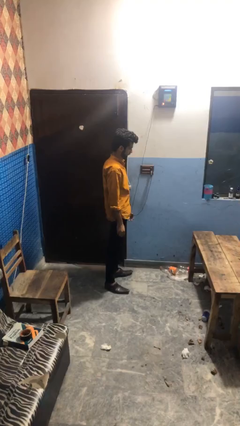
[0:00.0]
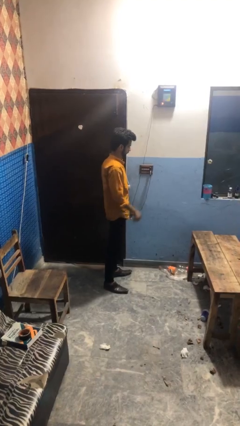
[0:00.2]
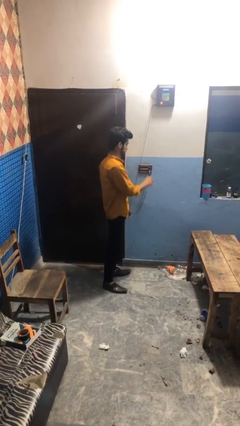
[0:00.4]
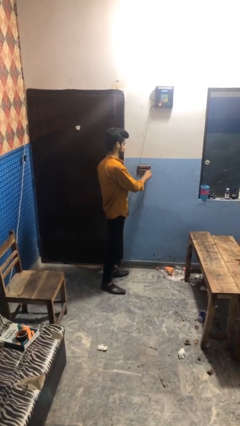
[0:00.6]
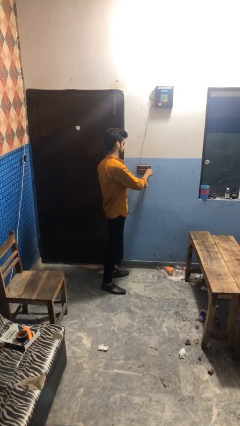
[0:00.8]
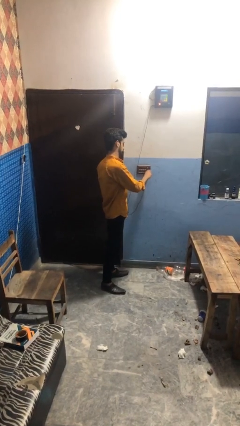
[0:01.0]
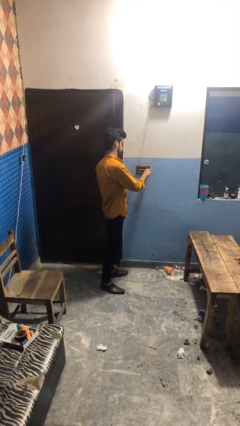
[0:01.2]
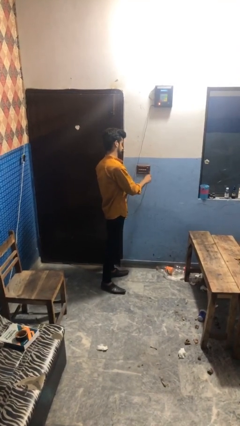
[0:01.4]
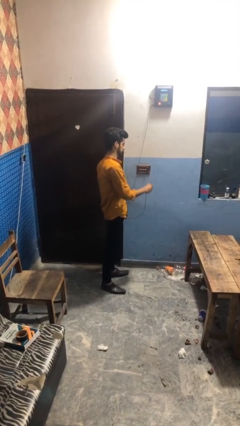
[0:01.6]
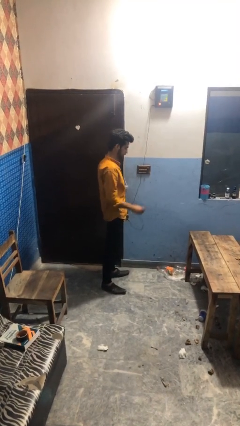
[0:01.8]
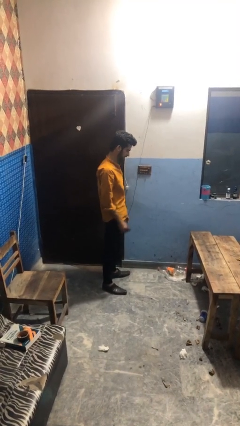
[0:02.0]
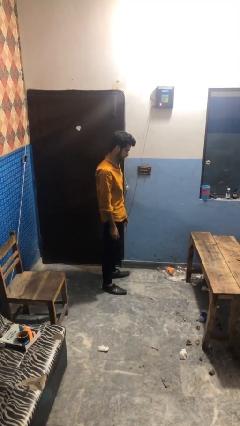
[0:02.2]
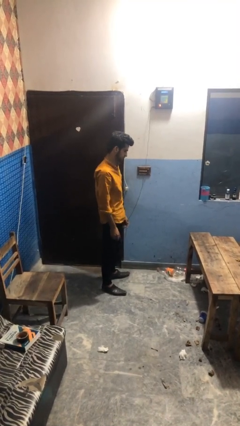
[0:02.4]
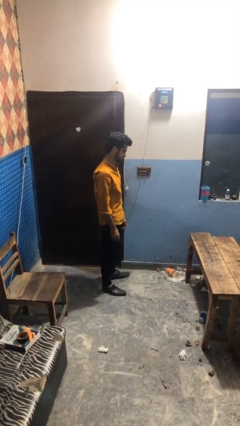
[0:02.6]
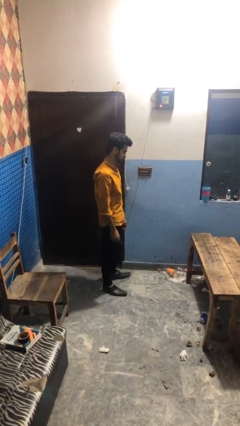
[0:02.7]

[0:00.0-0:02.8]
person unplugs from electrical socket

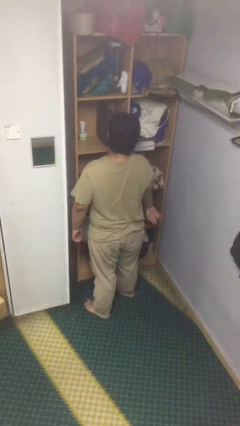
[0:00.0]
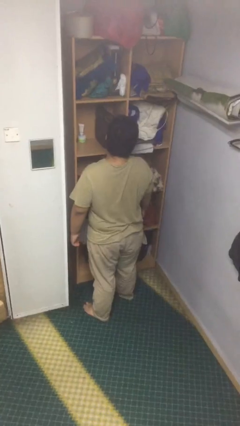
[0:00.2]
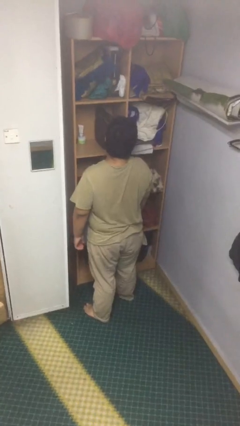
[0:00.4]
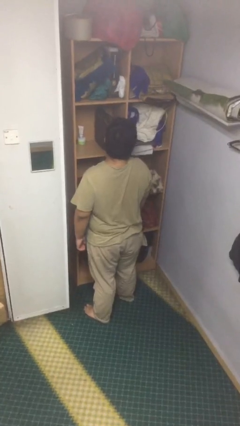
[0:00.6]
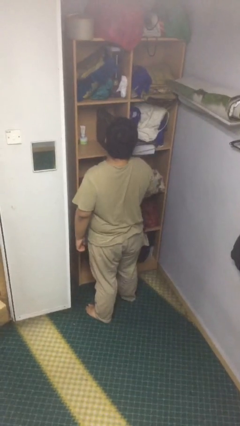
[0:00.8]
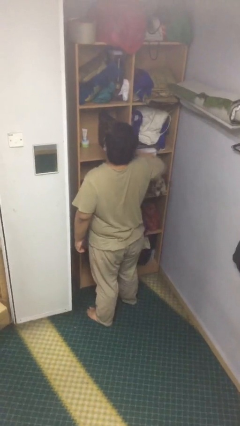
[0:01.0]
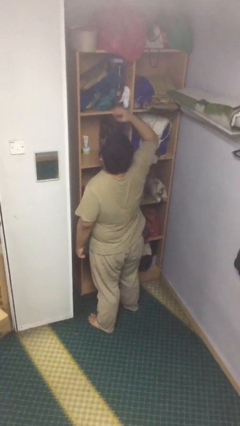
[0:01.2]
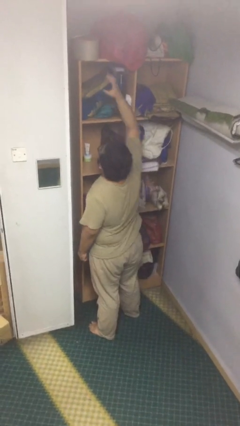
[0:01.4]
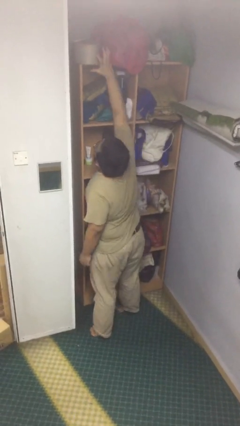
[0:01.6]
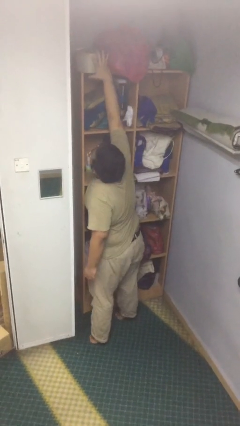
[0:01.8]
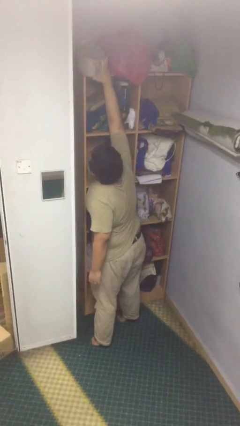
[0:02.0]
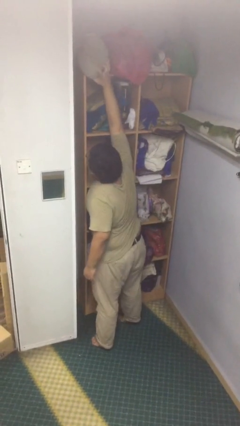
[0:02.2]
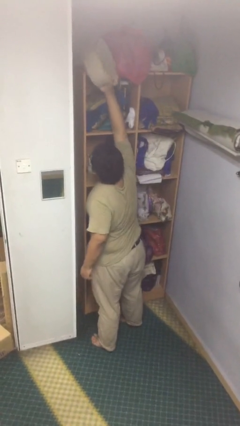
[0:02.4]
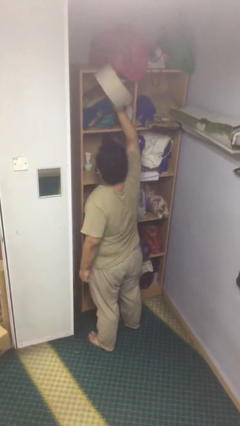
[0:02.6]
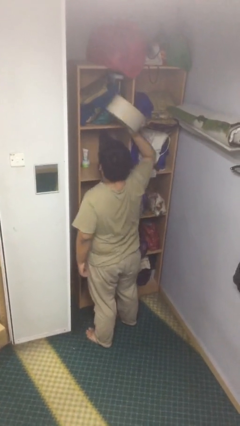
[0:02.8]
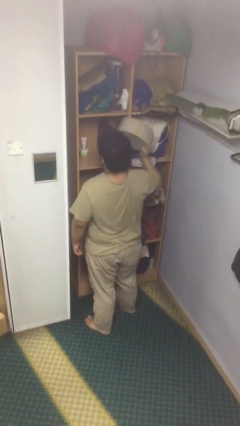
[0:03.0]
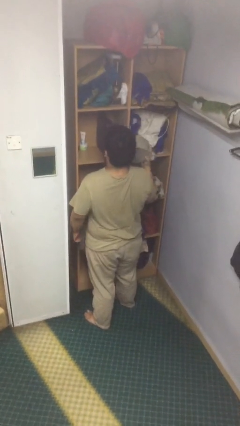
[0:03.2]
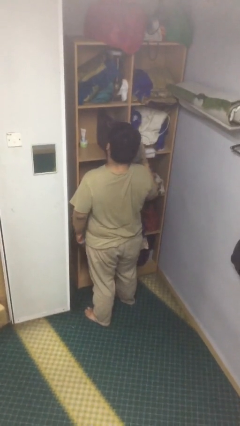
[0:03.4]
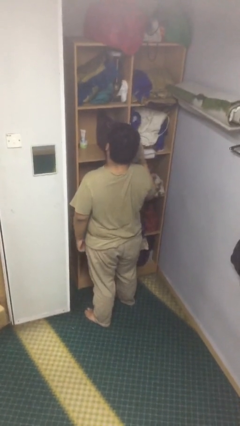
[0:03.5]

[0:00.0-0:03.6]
person picks up object from shelf

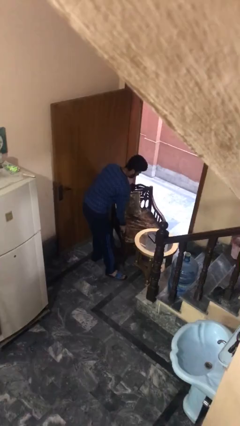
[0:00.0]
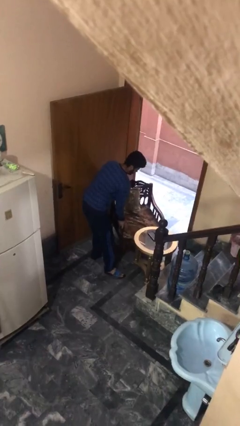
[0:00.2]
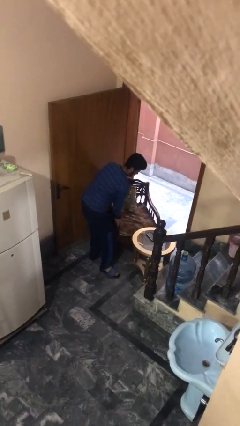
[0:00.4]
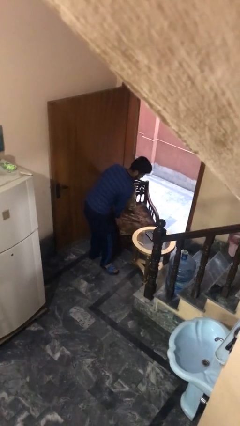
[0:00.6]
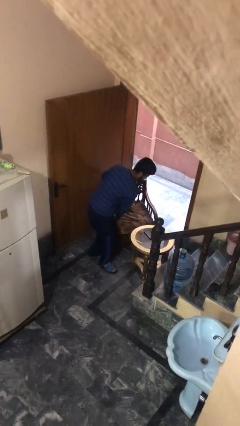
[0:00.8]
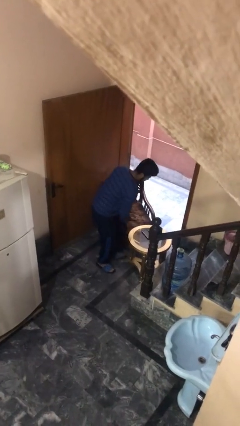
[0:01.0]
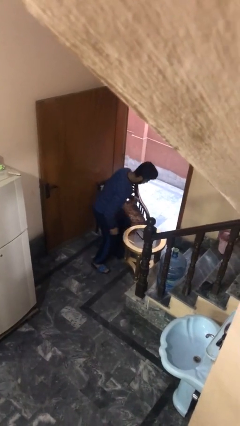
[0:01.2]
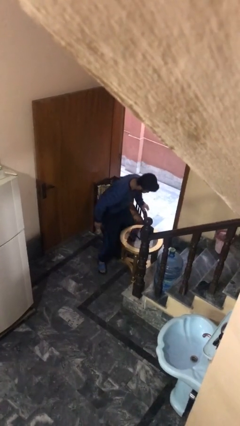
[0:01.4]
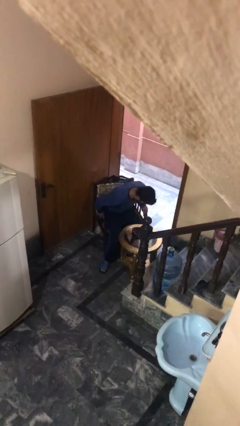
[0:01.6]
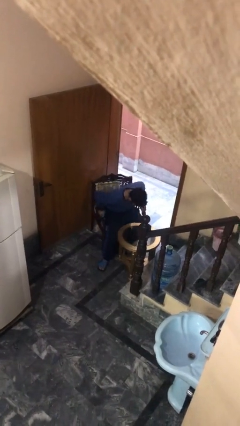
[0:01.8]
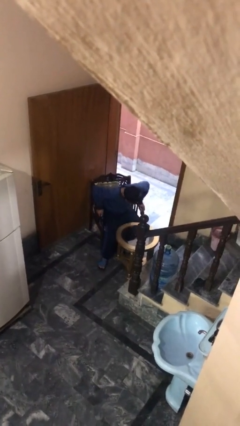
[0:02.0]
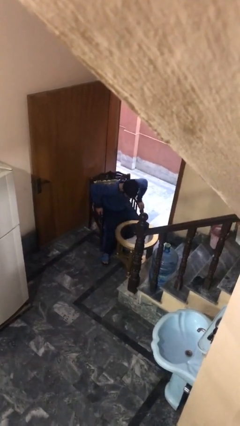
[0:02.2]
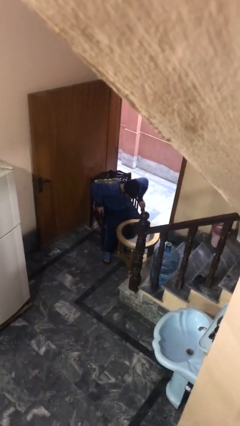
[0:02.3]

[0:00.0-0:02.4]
person sits down

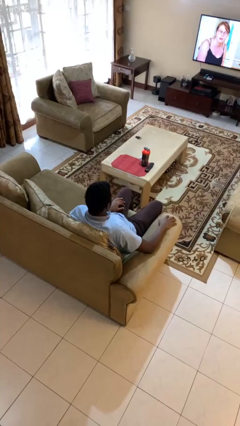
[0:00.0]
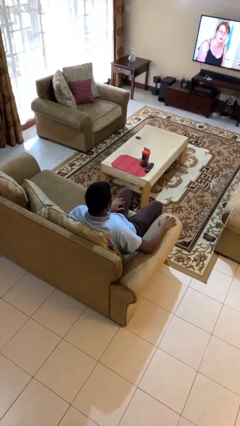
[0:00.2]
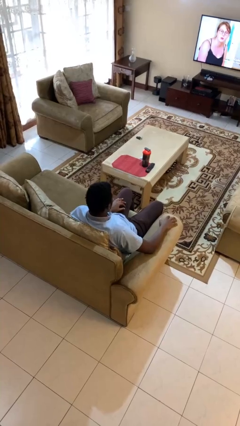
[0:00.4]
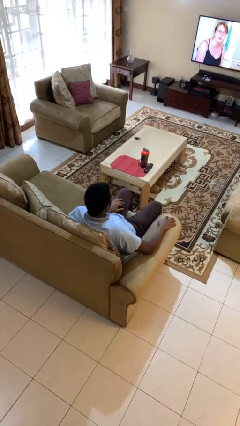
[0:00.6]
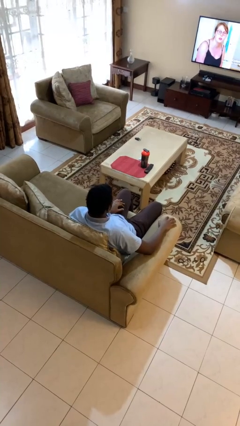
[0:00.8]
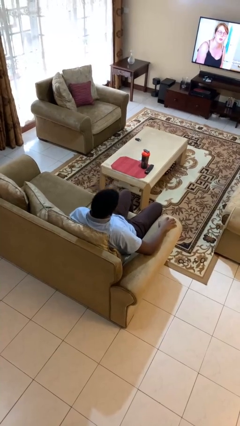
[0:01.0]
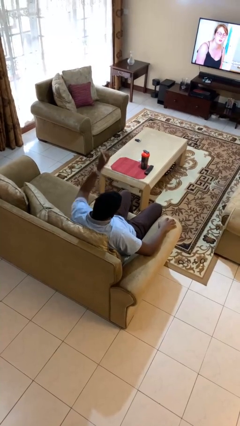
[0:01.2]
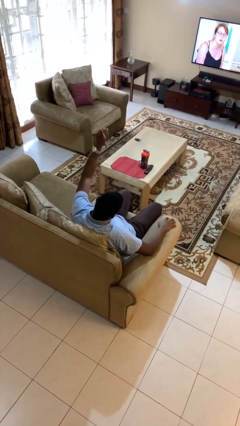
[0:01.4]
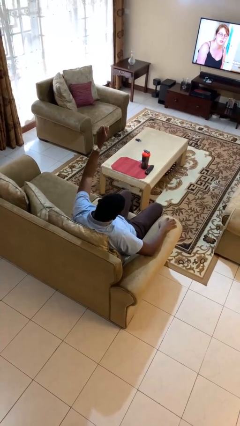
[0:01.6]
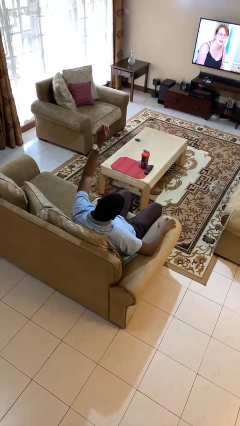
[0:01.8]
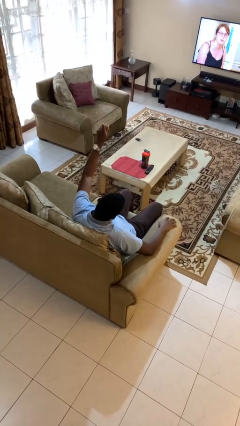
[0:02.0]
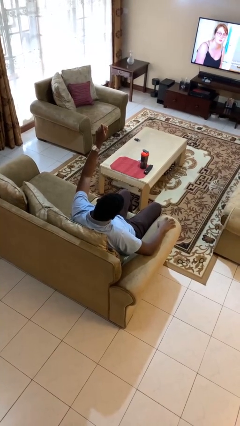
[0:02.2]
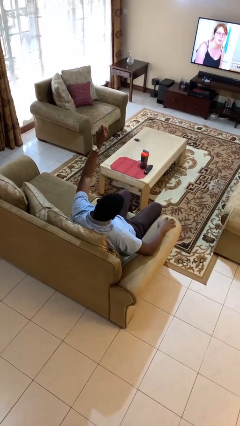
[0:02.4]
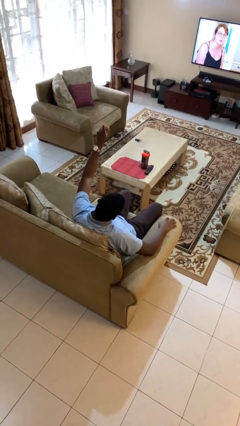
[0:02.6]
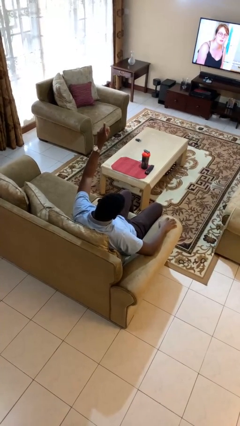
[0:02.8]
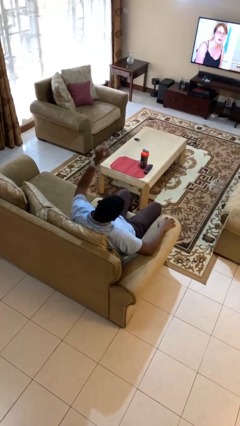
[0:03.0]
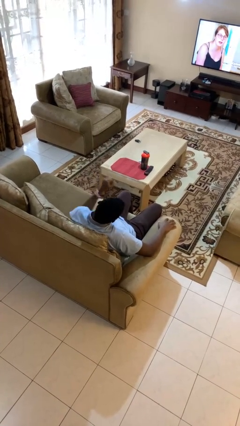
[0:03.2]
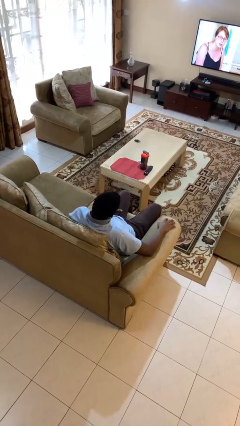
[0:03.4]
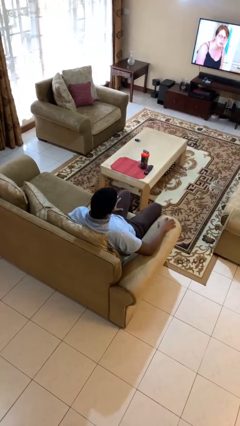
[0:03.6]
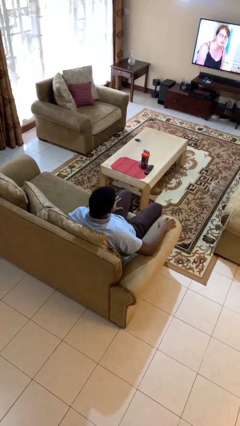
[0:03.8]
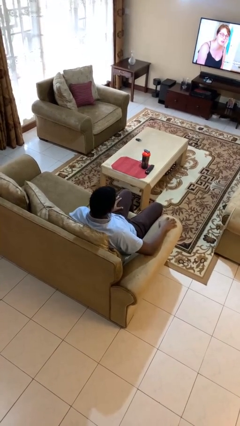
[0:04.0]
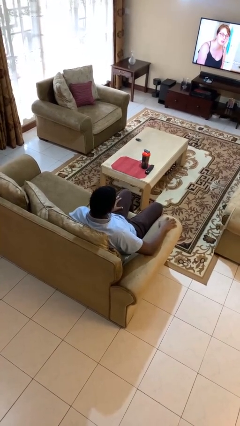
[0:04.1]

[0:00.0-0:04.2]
person gestures number one

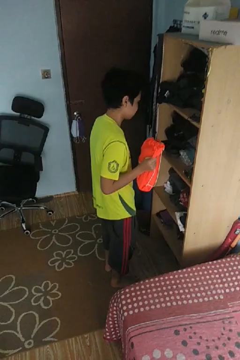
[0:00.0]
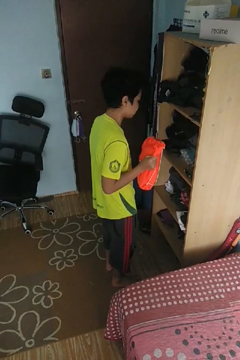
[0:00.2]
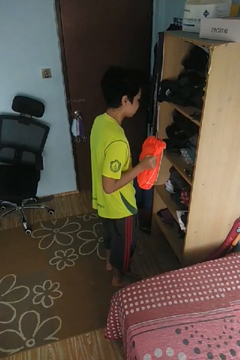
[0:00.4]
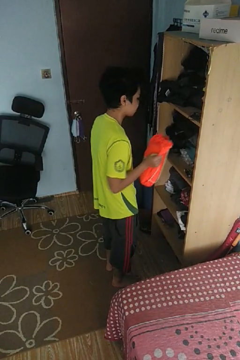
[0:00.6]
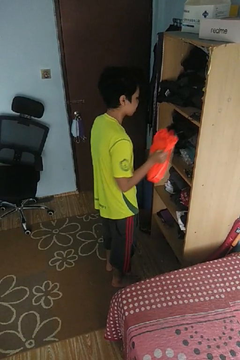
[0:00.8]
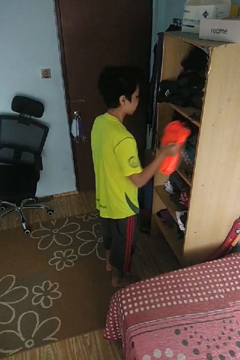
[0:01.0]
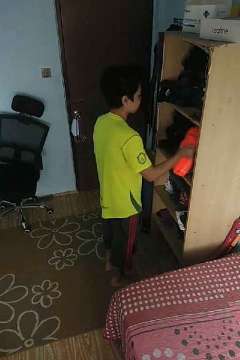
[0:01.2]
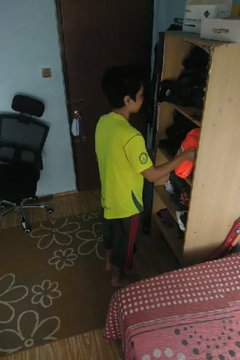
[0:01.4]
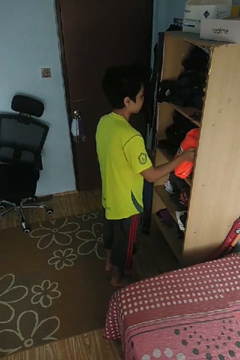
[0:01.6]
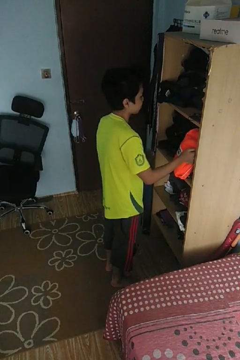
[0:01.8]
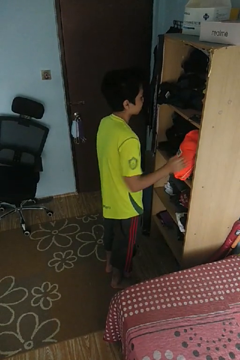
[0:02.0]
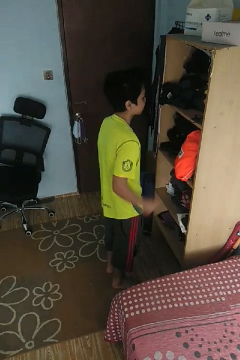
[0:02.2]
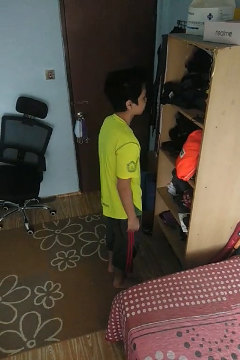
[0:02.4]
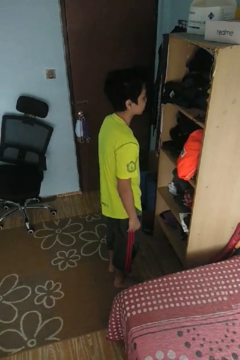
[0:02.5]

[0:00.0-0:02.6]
person puts down object into cabinet

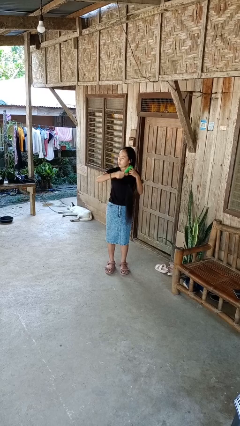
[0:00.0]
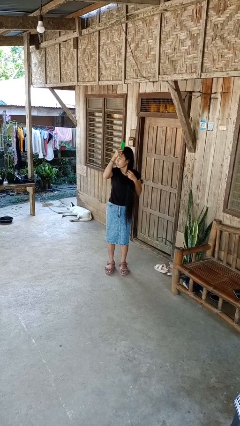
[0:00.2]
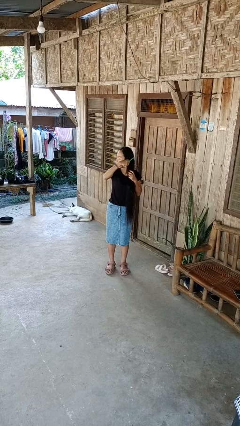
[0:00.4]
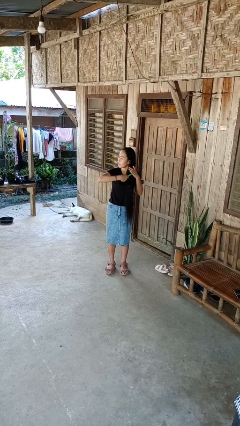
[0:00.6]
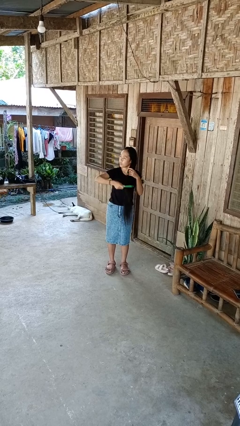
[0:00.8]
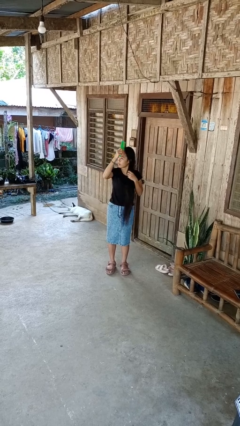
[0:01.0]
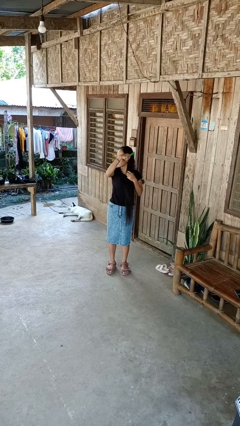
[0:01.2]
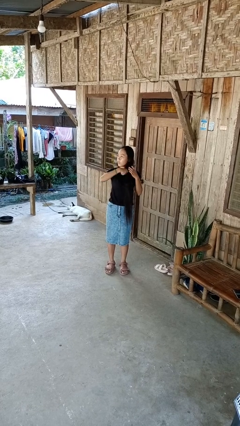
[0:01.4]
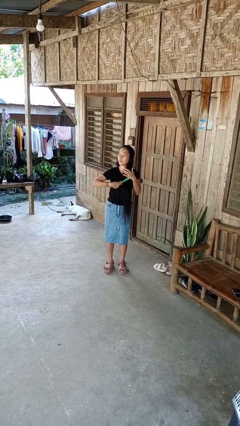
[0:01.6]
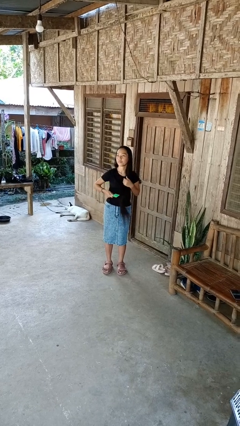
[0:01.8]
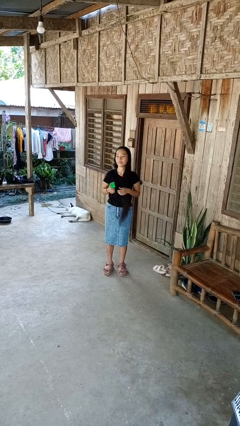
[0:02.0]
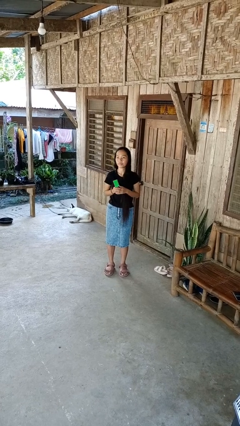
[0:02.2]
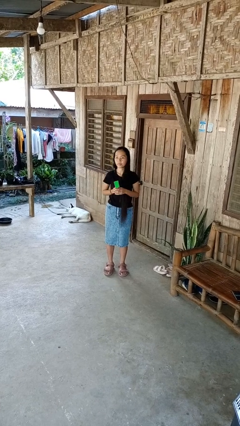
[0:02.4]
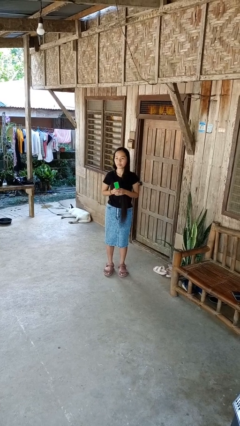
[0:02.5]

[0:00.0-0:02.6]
person brushes hair
